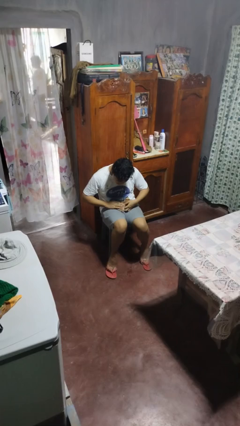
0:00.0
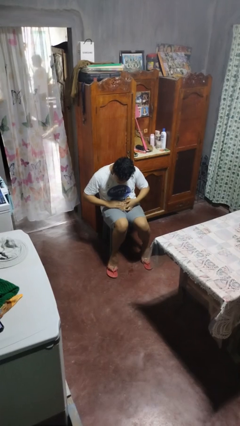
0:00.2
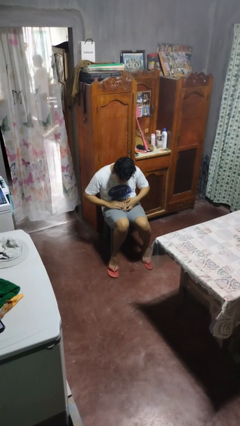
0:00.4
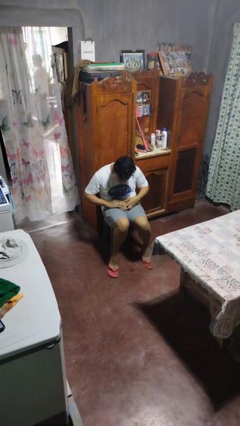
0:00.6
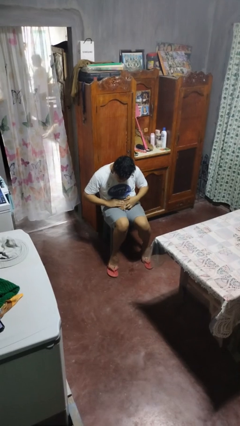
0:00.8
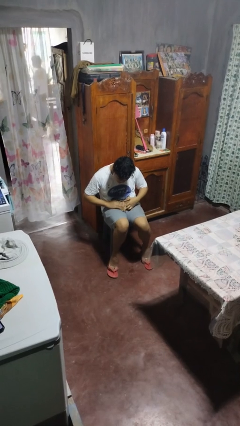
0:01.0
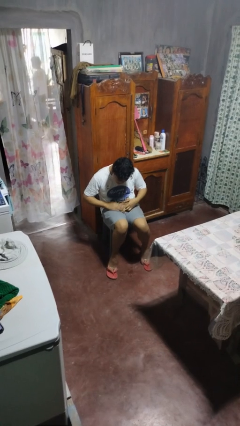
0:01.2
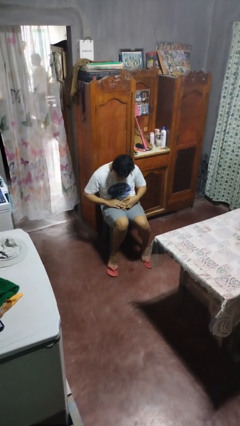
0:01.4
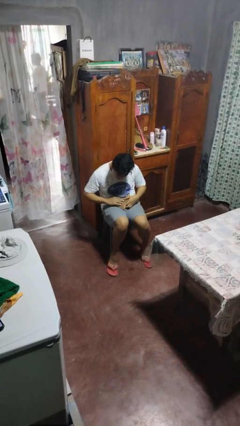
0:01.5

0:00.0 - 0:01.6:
person pets cat

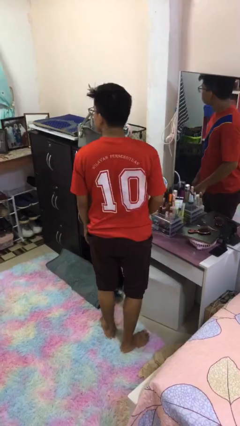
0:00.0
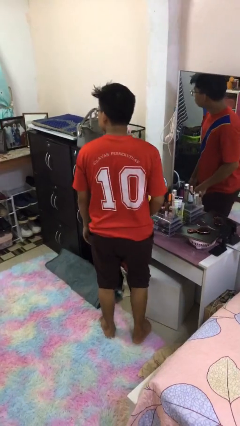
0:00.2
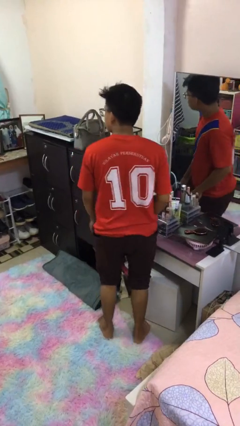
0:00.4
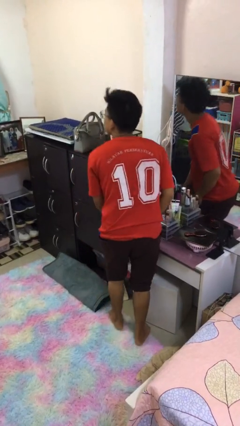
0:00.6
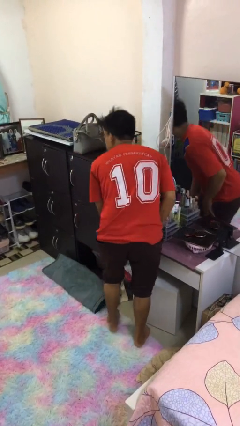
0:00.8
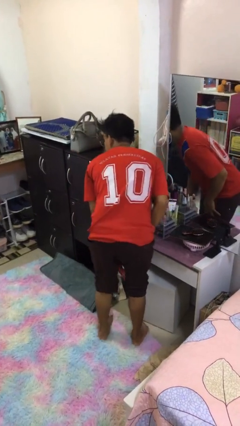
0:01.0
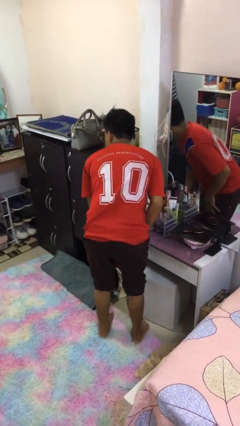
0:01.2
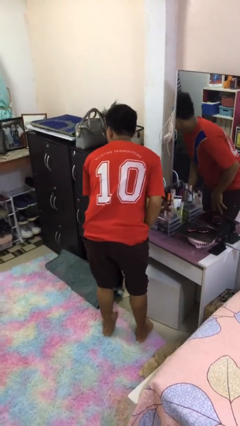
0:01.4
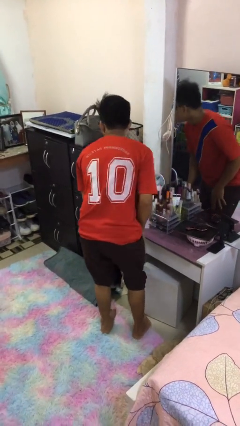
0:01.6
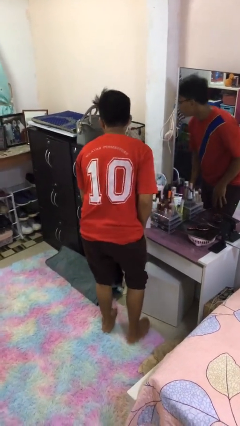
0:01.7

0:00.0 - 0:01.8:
person bumps into table

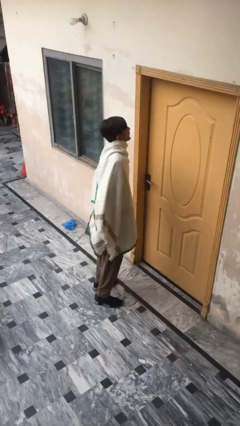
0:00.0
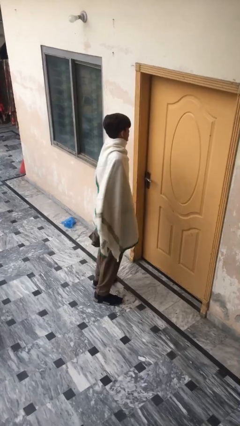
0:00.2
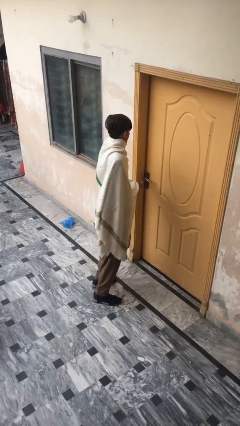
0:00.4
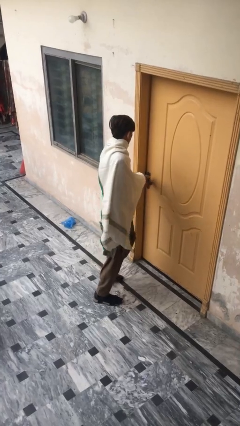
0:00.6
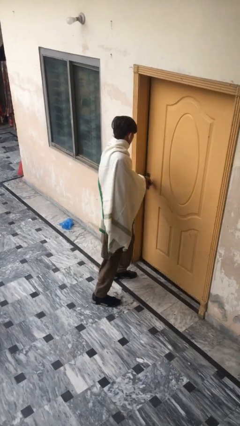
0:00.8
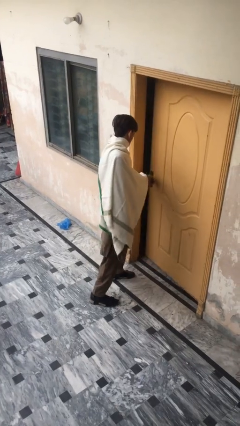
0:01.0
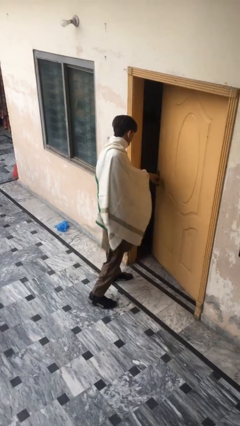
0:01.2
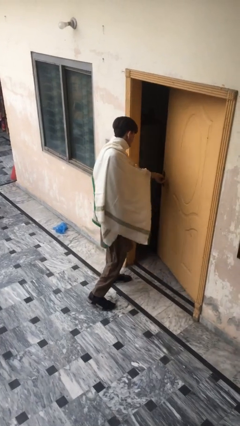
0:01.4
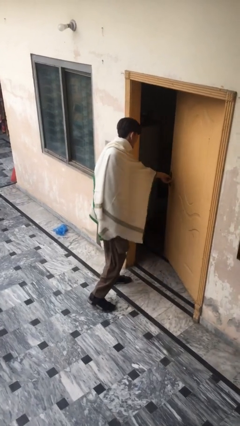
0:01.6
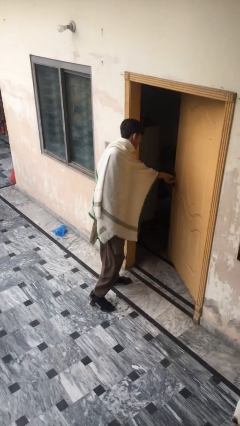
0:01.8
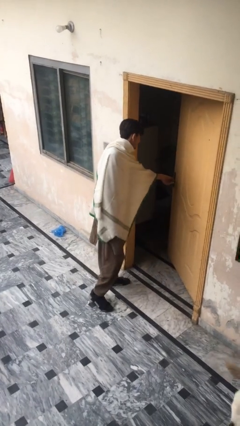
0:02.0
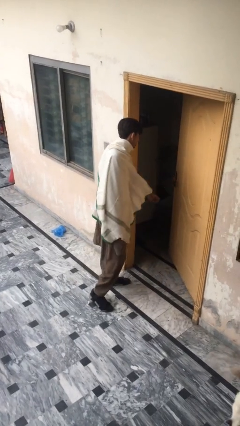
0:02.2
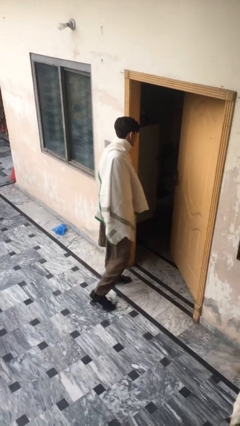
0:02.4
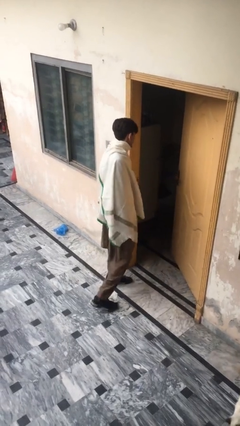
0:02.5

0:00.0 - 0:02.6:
person opens facility door

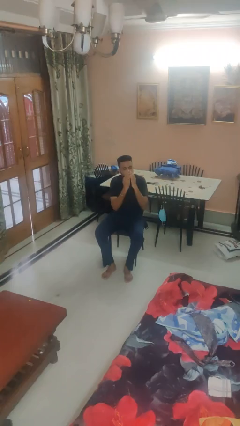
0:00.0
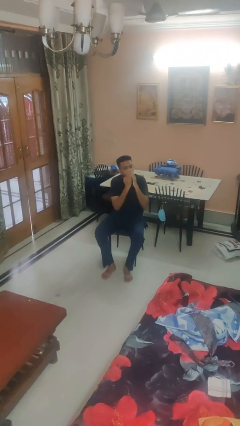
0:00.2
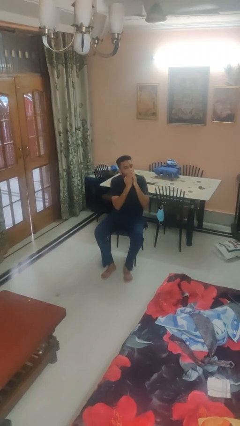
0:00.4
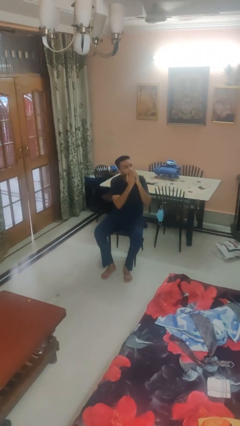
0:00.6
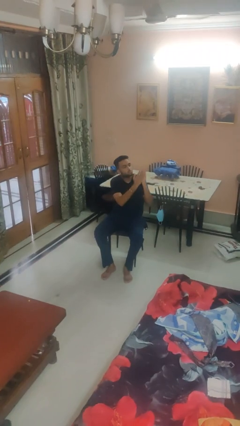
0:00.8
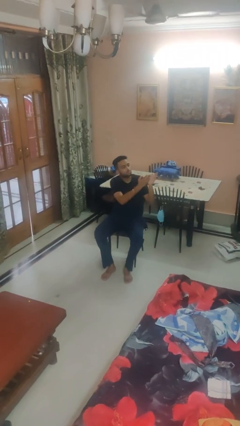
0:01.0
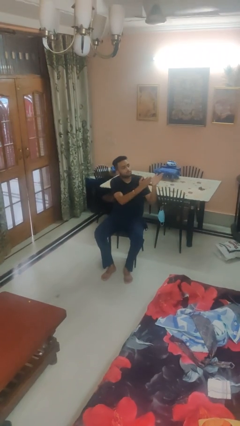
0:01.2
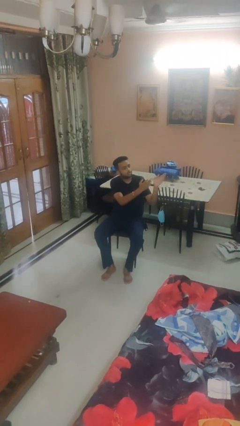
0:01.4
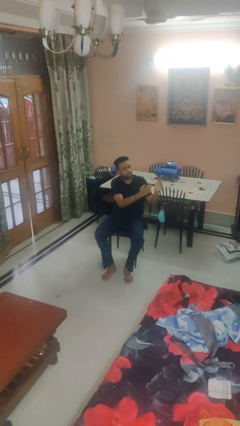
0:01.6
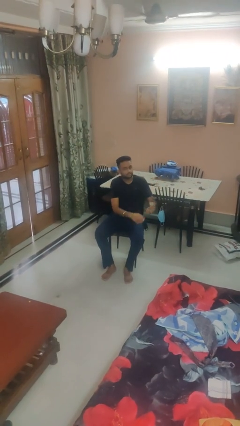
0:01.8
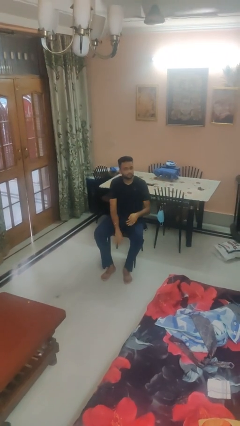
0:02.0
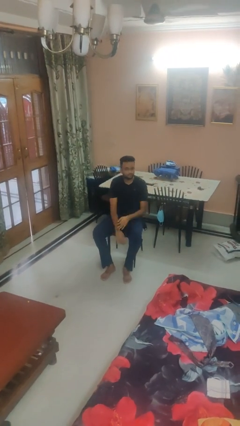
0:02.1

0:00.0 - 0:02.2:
person gestures blow kiss

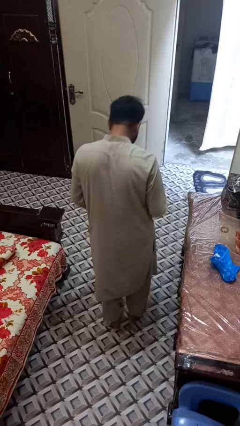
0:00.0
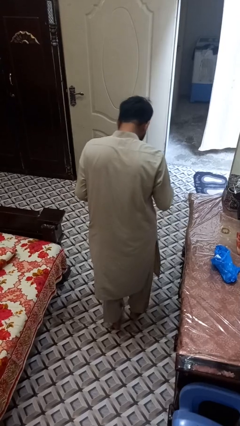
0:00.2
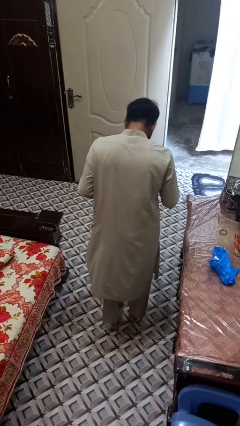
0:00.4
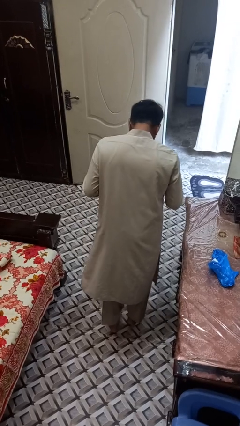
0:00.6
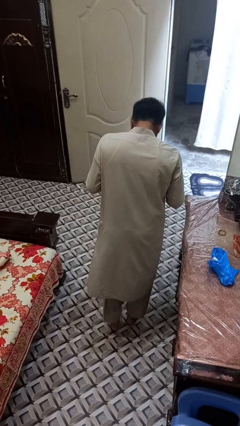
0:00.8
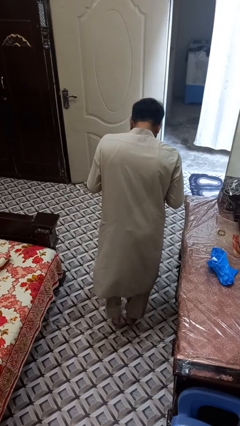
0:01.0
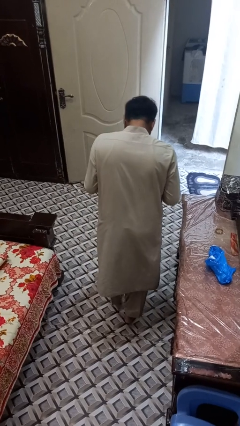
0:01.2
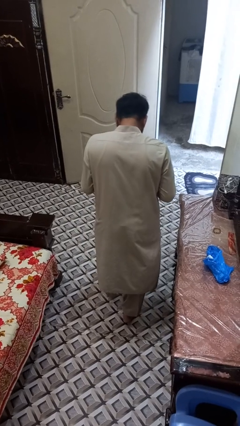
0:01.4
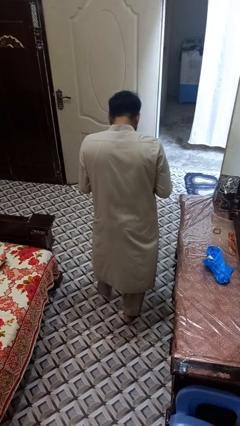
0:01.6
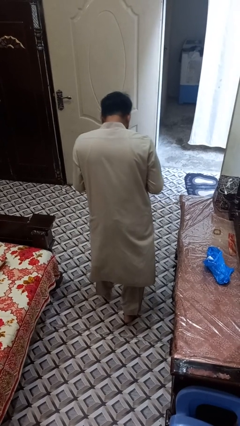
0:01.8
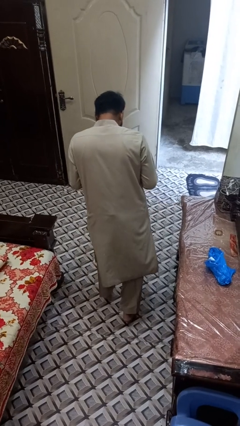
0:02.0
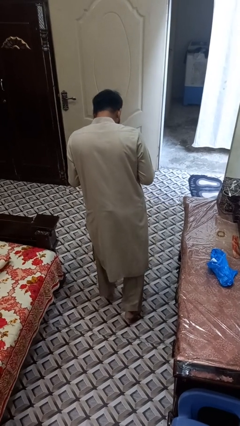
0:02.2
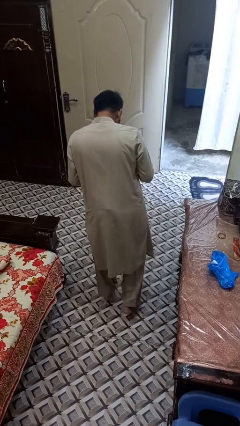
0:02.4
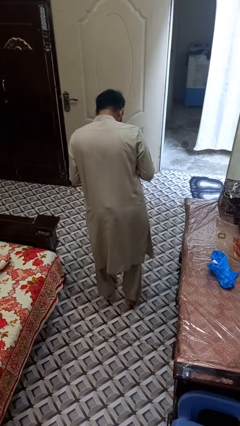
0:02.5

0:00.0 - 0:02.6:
person walks tiptoe

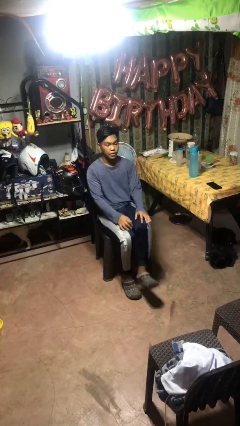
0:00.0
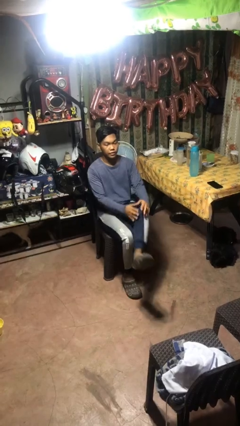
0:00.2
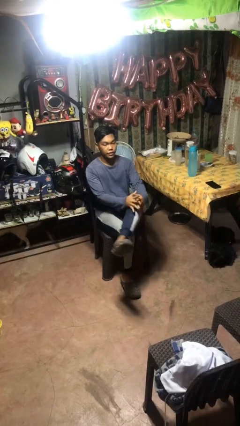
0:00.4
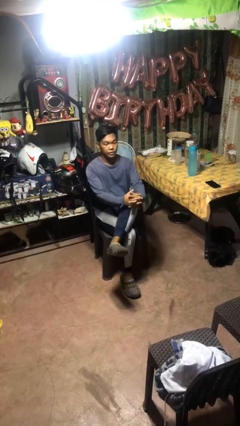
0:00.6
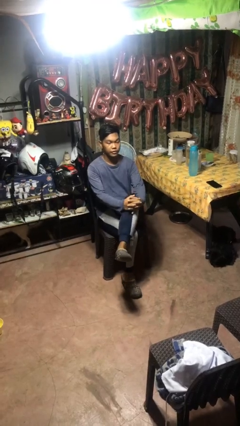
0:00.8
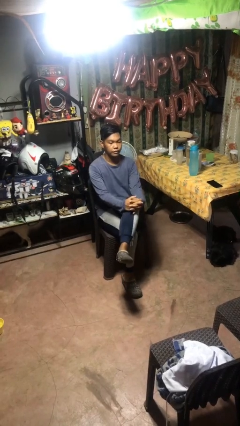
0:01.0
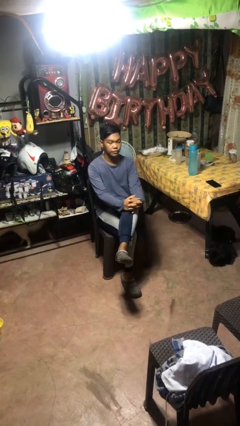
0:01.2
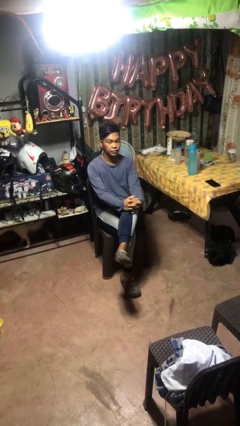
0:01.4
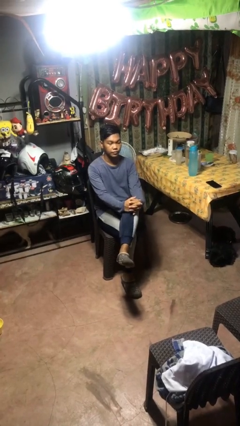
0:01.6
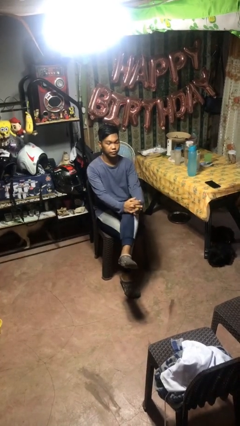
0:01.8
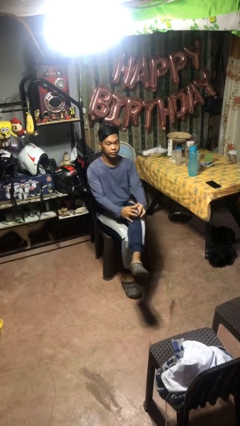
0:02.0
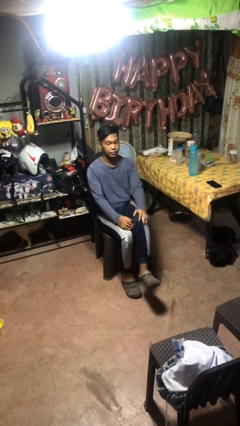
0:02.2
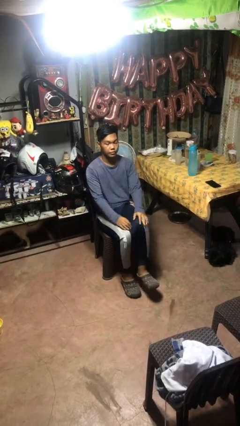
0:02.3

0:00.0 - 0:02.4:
person crosses legs

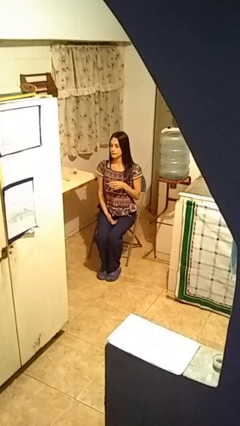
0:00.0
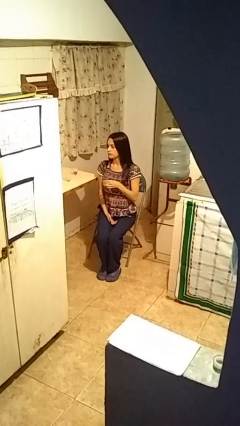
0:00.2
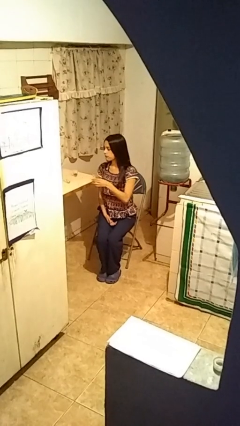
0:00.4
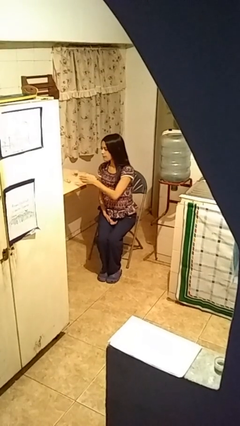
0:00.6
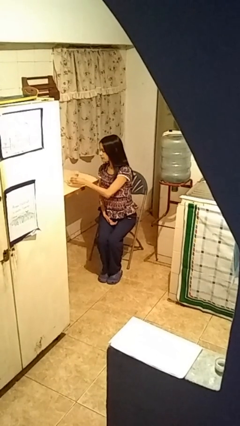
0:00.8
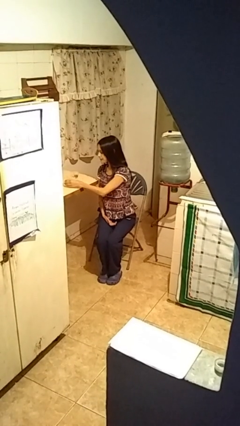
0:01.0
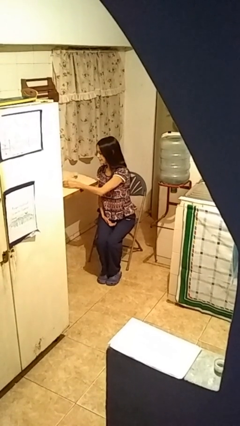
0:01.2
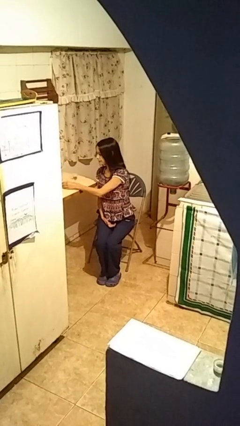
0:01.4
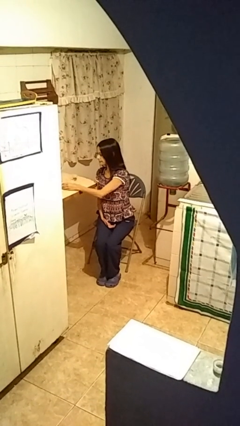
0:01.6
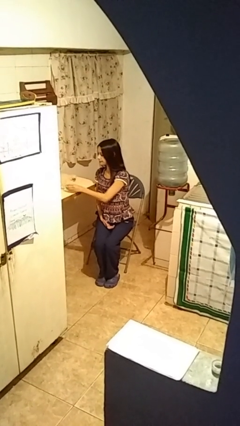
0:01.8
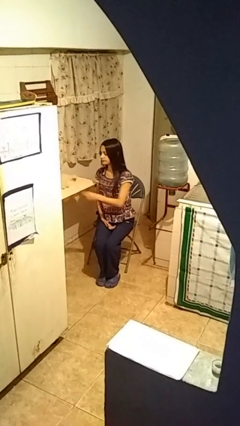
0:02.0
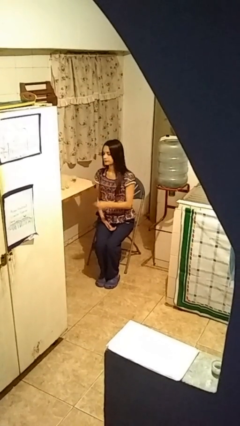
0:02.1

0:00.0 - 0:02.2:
person puts down object on table

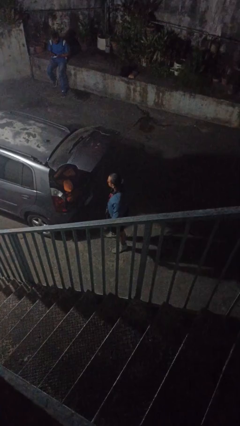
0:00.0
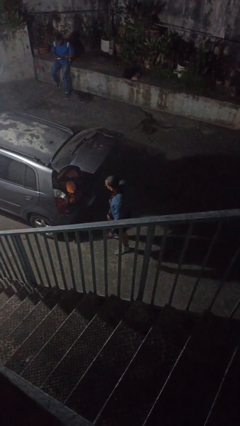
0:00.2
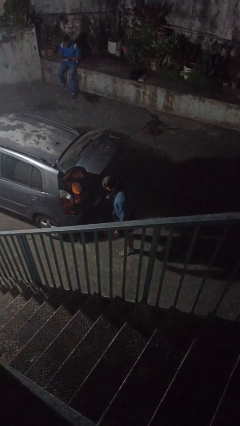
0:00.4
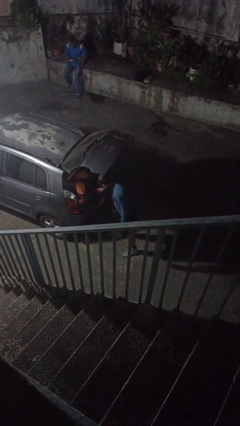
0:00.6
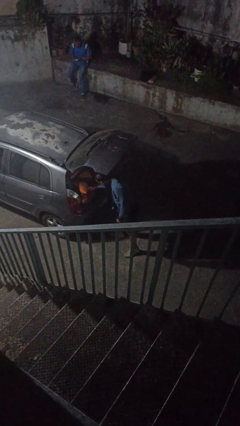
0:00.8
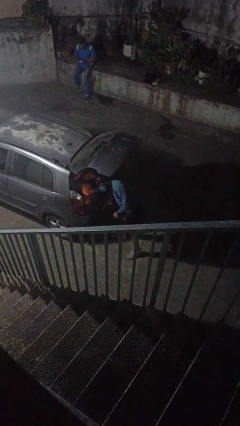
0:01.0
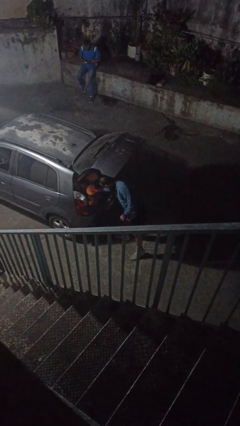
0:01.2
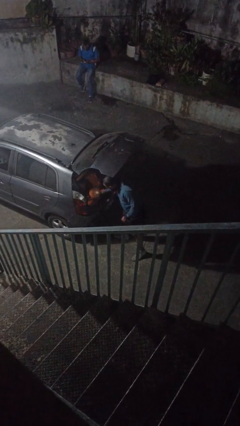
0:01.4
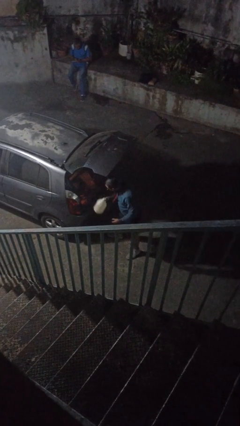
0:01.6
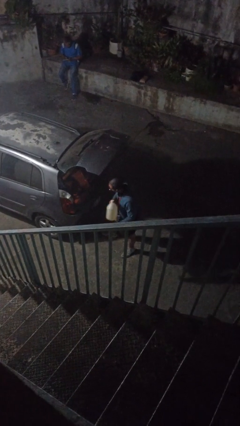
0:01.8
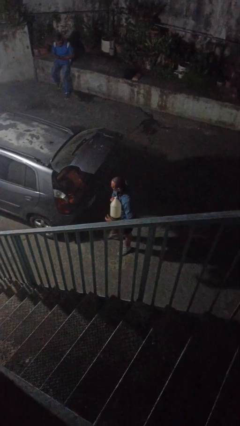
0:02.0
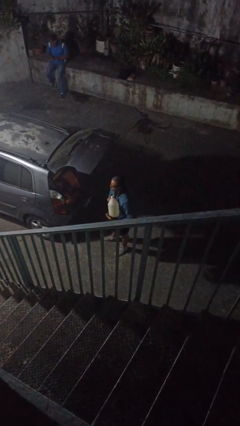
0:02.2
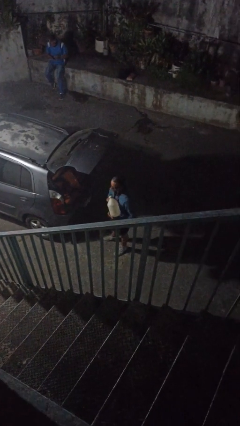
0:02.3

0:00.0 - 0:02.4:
person unloads car
